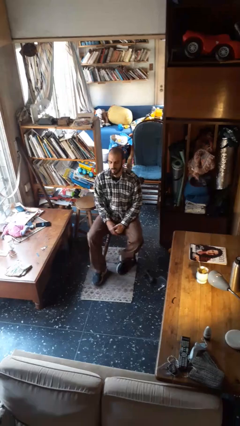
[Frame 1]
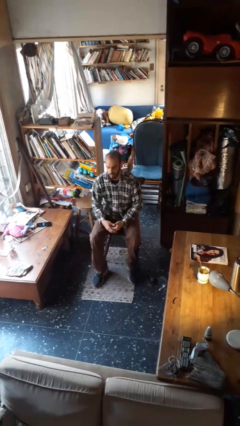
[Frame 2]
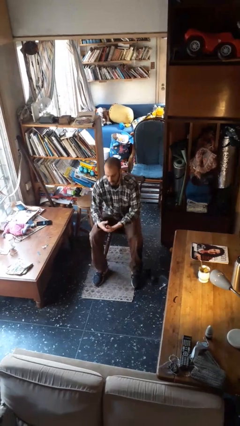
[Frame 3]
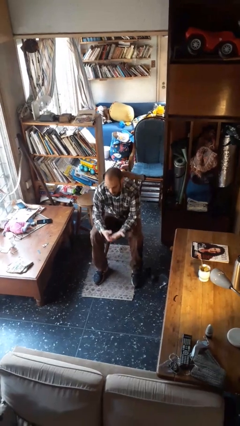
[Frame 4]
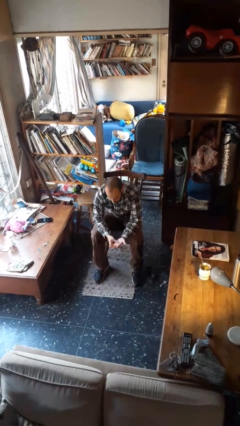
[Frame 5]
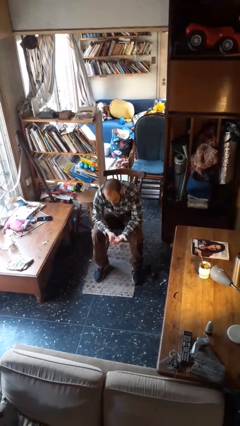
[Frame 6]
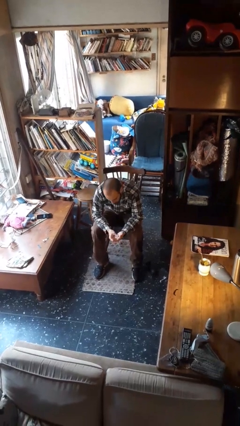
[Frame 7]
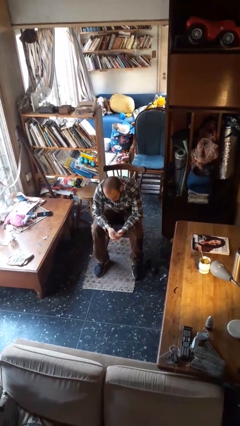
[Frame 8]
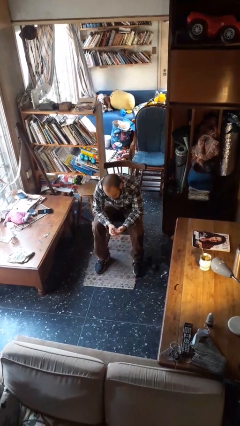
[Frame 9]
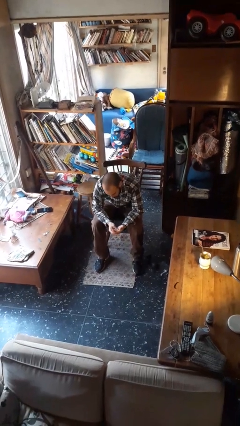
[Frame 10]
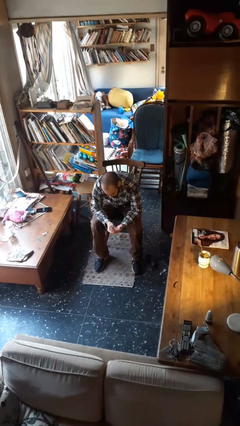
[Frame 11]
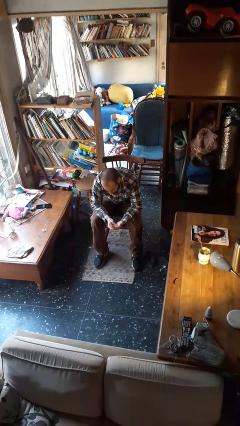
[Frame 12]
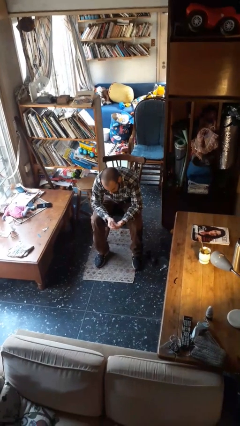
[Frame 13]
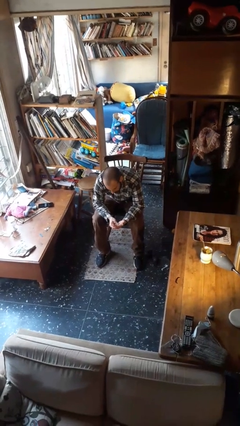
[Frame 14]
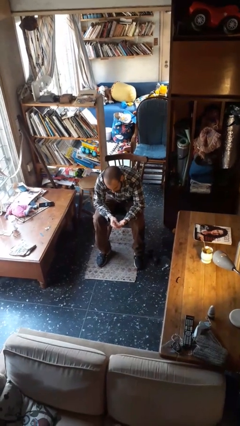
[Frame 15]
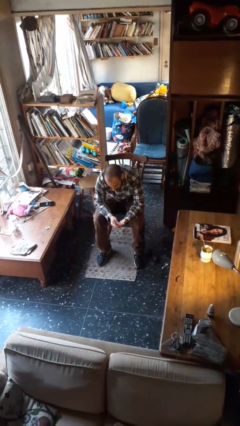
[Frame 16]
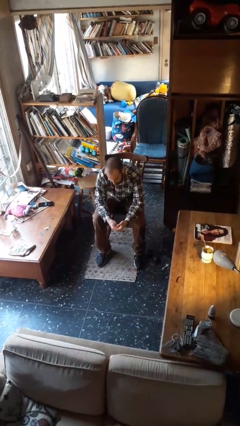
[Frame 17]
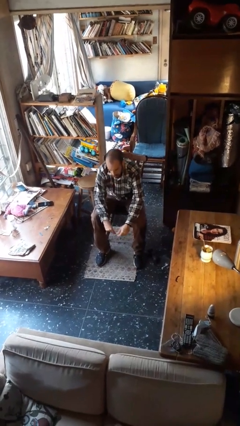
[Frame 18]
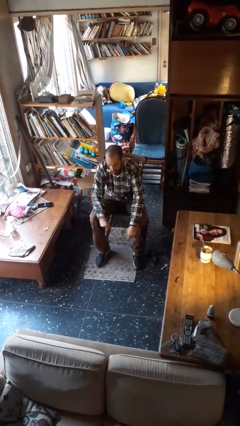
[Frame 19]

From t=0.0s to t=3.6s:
person looks at hands in lap

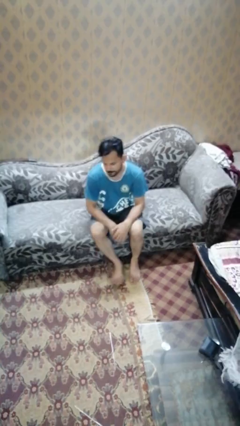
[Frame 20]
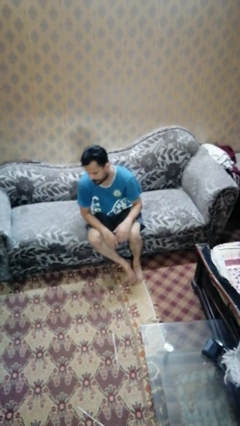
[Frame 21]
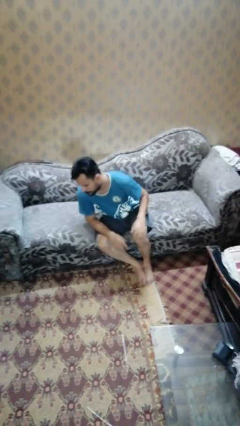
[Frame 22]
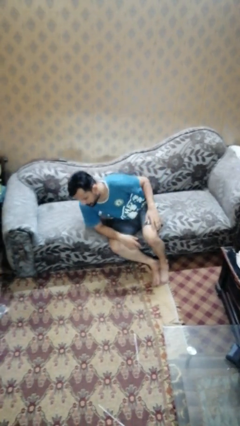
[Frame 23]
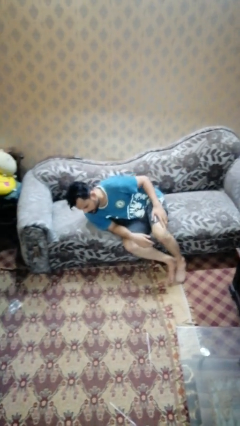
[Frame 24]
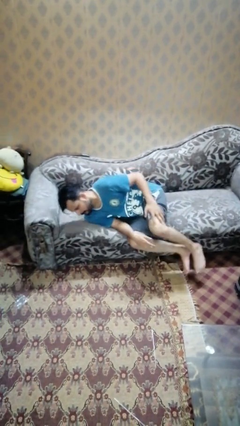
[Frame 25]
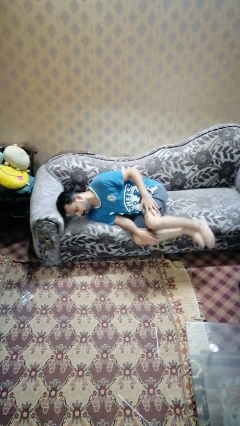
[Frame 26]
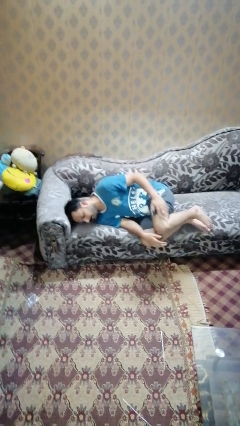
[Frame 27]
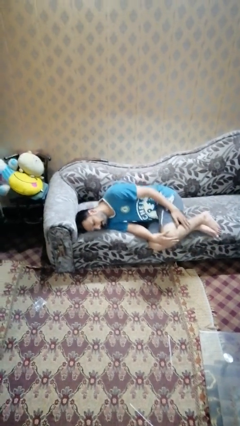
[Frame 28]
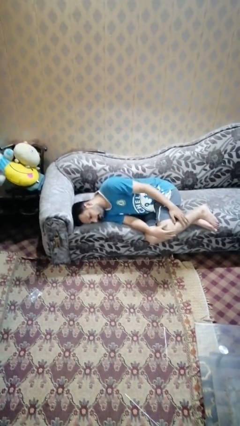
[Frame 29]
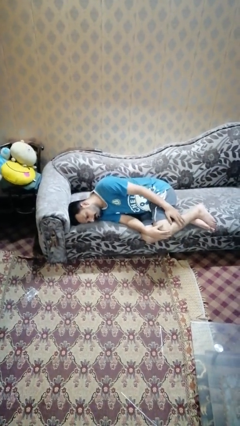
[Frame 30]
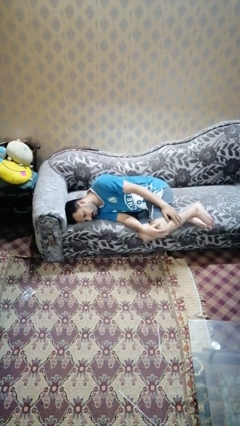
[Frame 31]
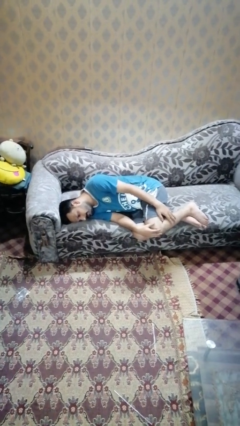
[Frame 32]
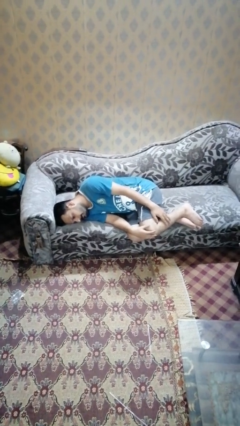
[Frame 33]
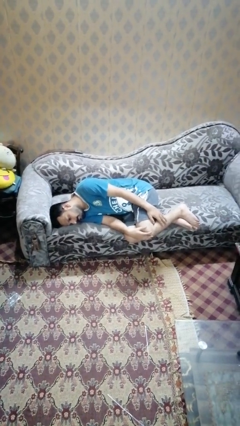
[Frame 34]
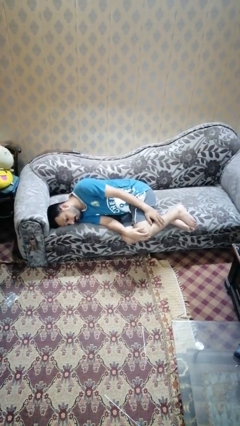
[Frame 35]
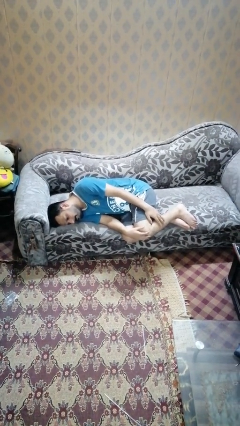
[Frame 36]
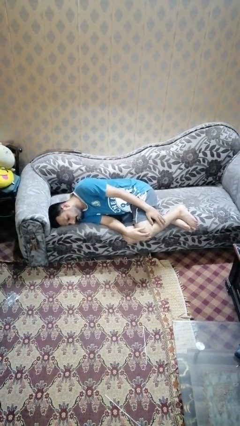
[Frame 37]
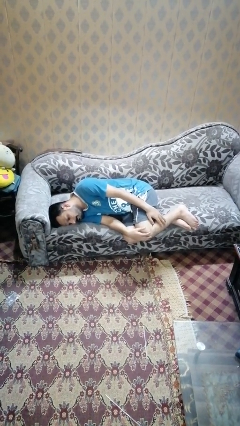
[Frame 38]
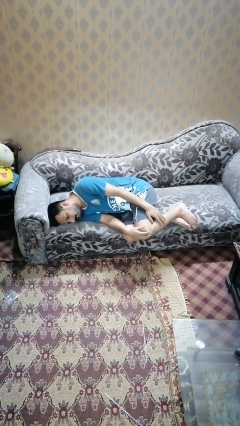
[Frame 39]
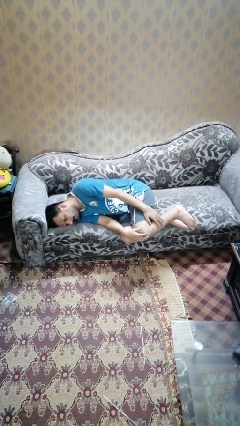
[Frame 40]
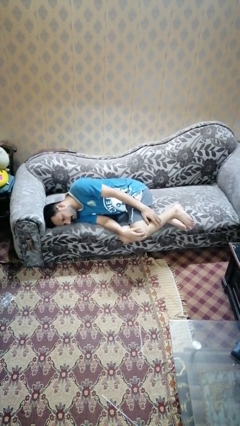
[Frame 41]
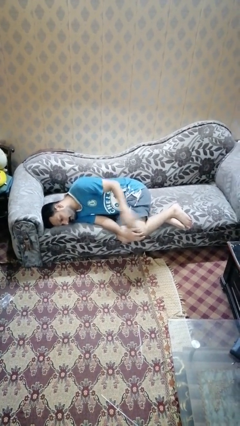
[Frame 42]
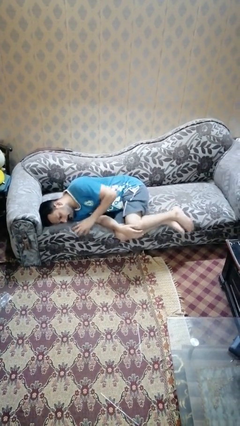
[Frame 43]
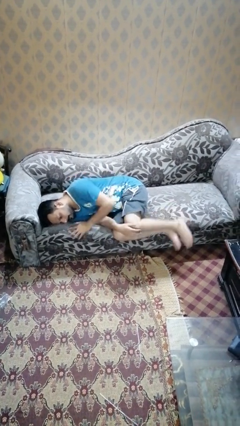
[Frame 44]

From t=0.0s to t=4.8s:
person lies down on couch

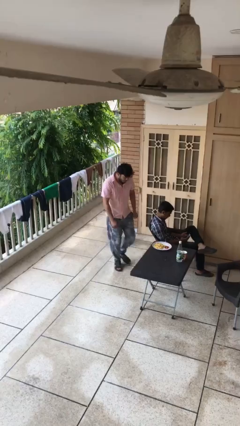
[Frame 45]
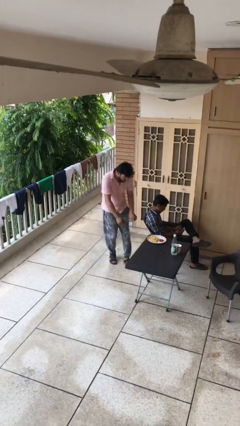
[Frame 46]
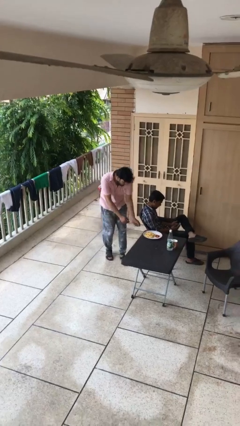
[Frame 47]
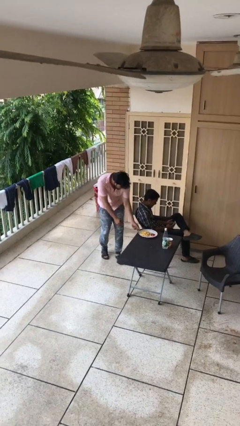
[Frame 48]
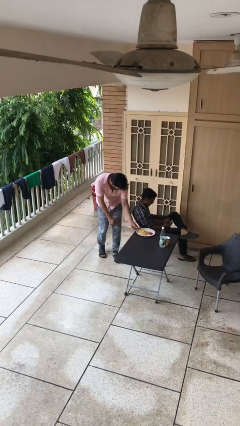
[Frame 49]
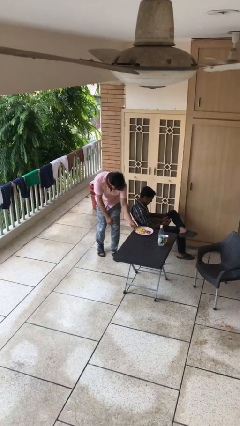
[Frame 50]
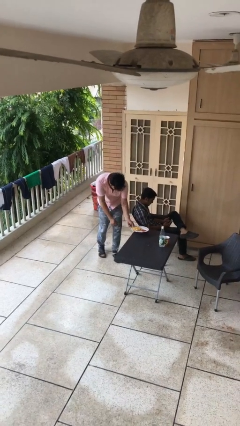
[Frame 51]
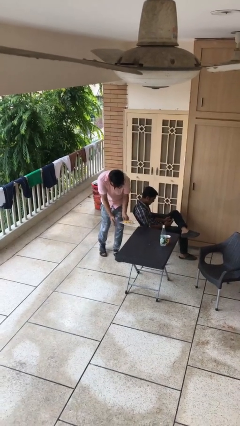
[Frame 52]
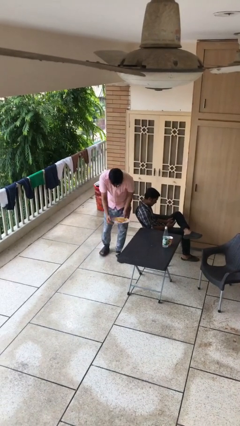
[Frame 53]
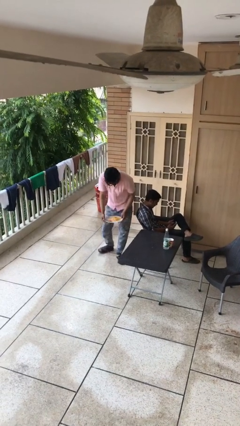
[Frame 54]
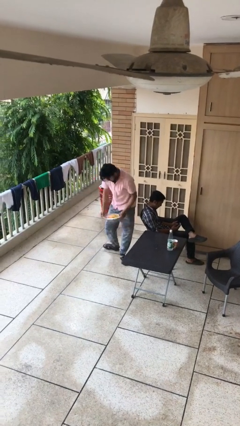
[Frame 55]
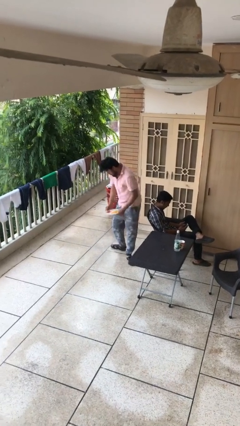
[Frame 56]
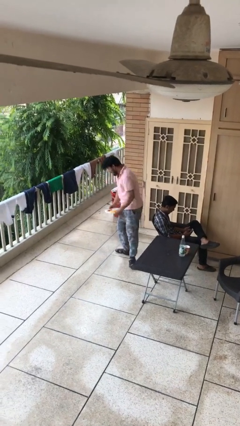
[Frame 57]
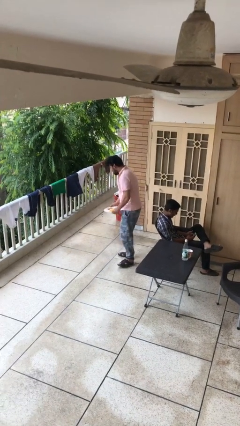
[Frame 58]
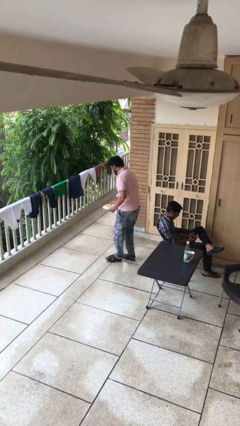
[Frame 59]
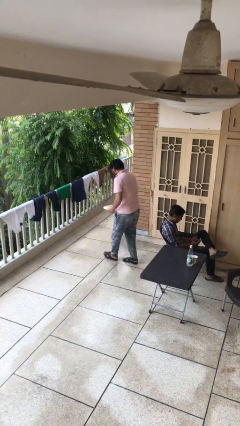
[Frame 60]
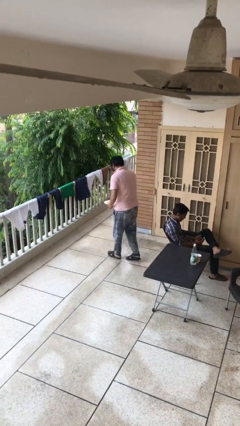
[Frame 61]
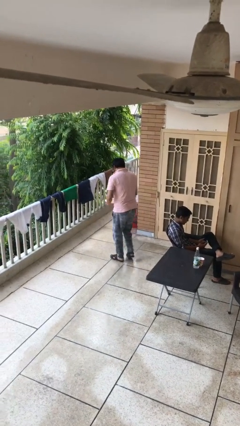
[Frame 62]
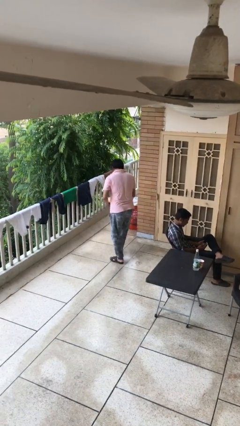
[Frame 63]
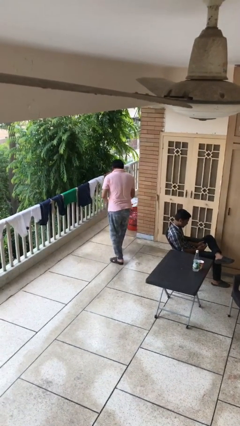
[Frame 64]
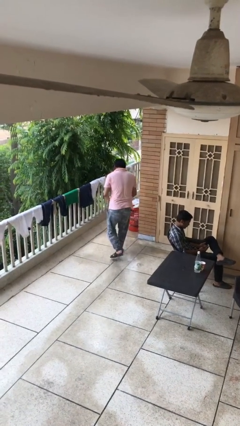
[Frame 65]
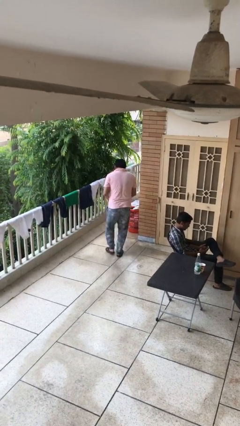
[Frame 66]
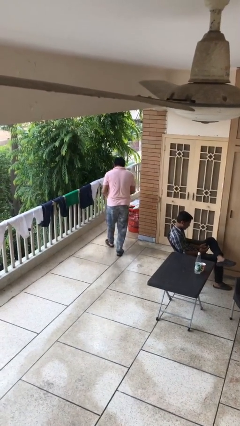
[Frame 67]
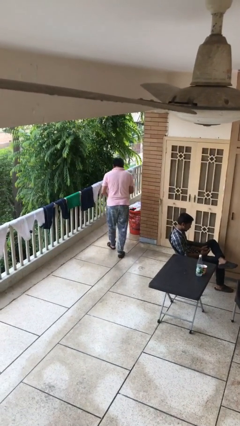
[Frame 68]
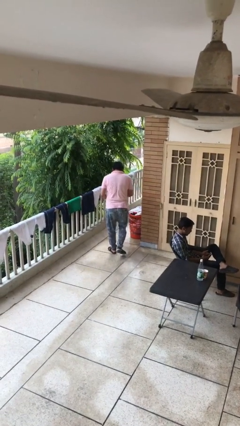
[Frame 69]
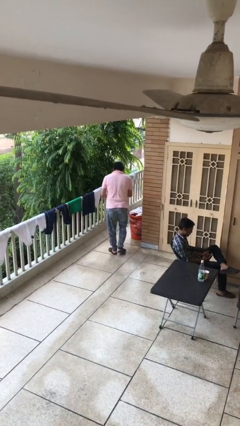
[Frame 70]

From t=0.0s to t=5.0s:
person steals object from person

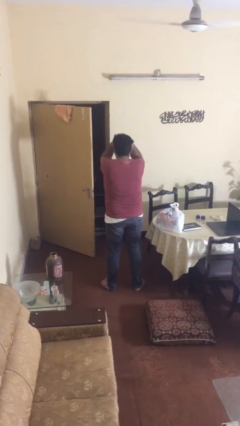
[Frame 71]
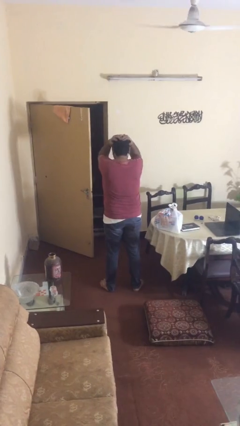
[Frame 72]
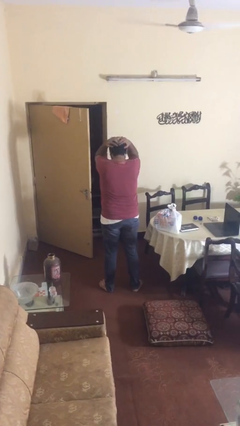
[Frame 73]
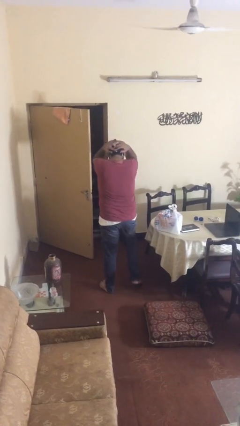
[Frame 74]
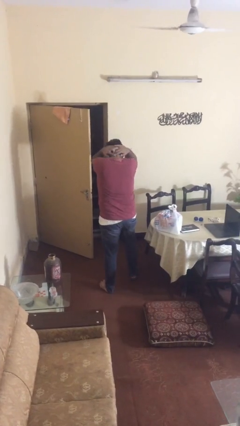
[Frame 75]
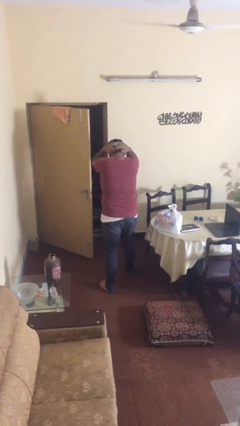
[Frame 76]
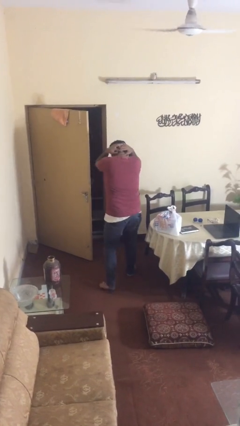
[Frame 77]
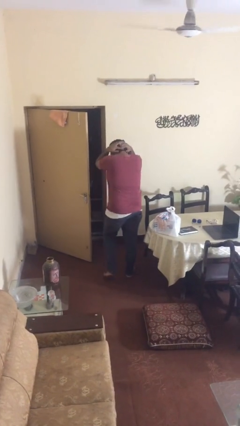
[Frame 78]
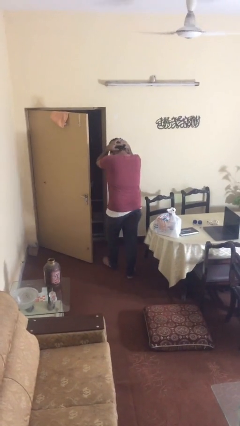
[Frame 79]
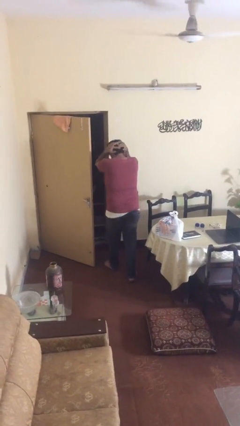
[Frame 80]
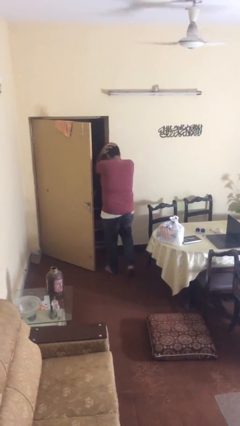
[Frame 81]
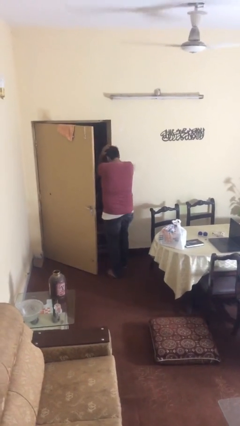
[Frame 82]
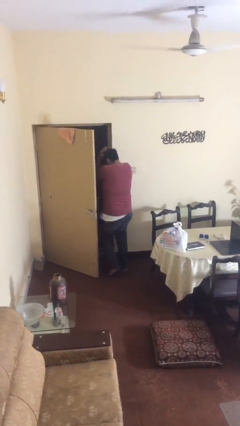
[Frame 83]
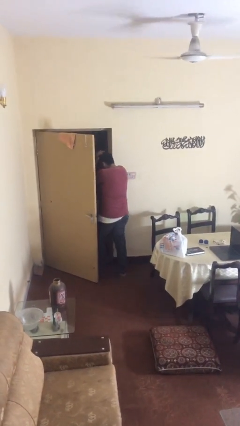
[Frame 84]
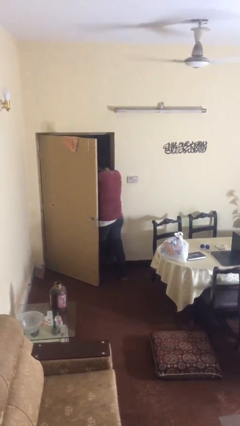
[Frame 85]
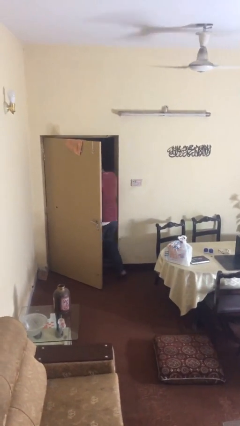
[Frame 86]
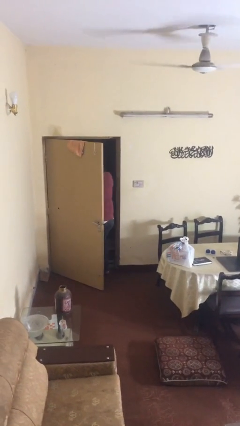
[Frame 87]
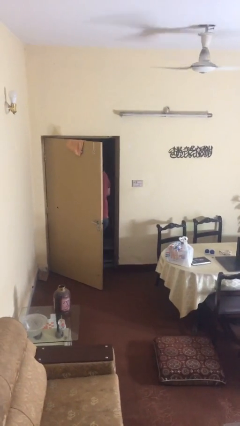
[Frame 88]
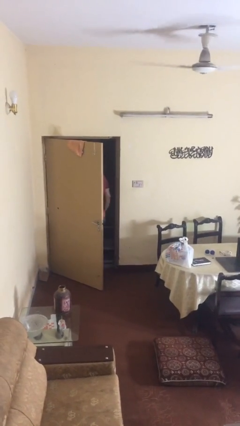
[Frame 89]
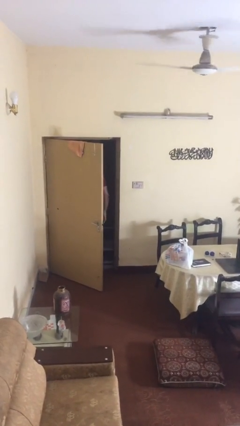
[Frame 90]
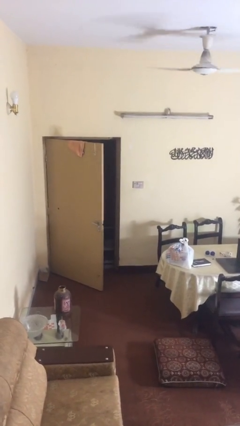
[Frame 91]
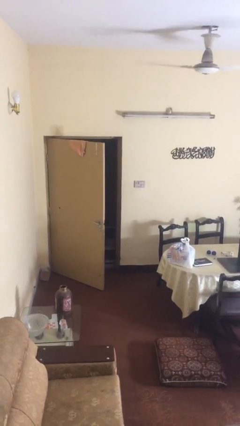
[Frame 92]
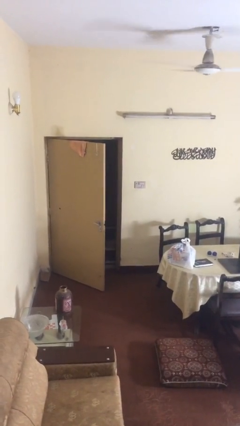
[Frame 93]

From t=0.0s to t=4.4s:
person exits scene through structure

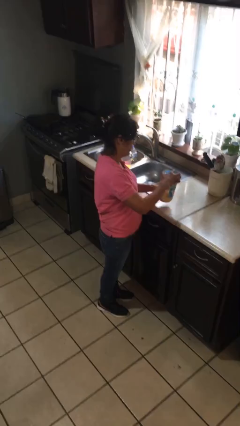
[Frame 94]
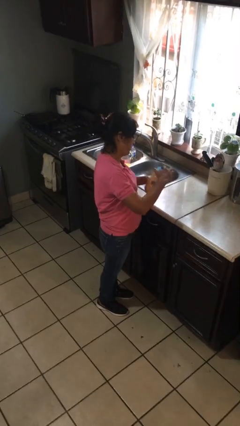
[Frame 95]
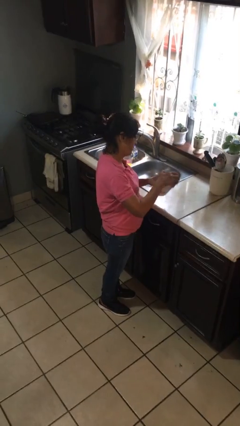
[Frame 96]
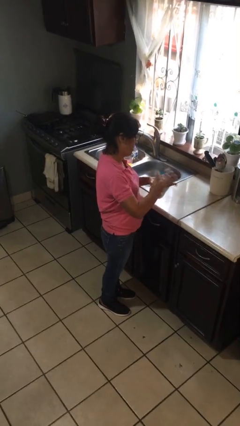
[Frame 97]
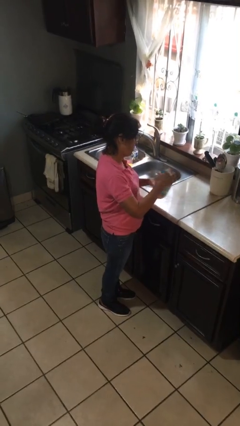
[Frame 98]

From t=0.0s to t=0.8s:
person closes jar
